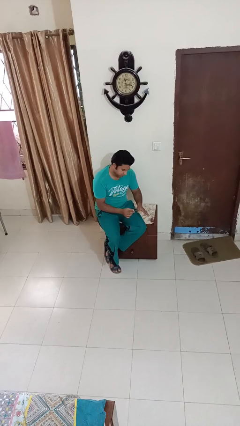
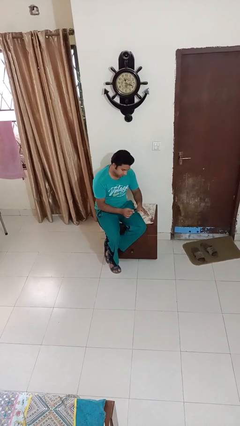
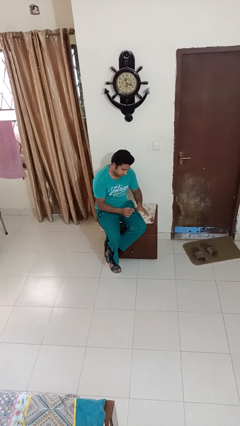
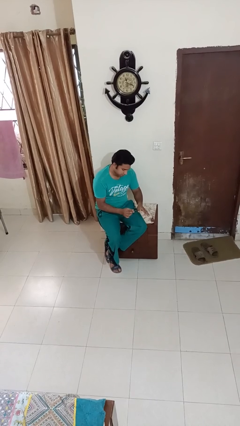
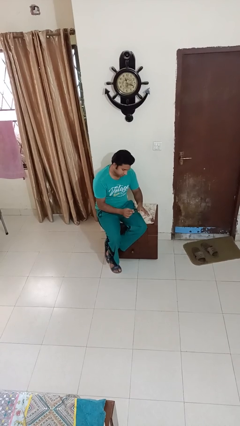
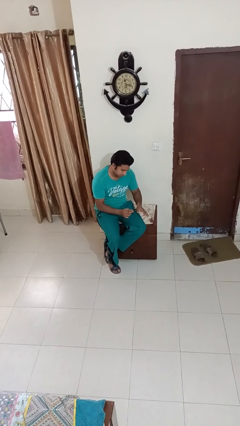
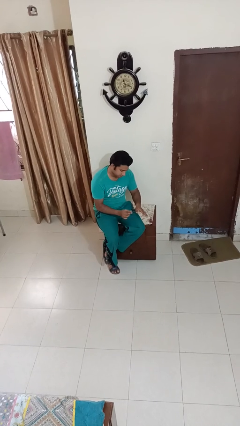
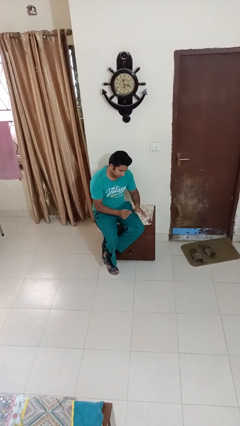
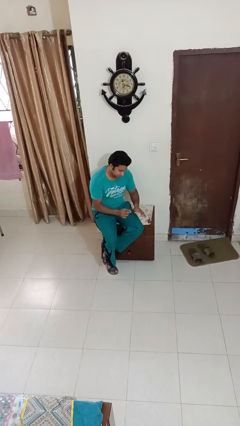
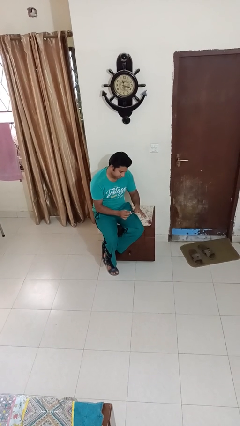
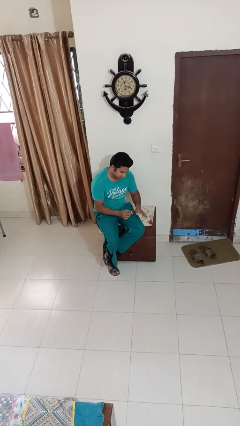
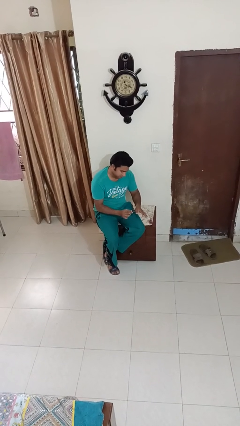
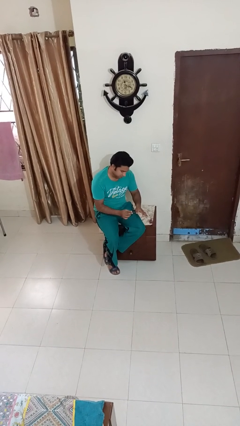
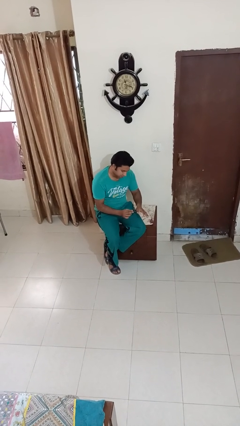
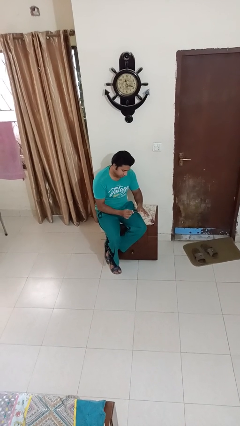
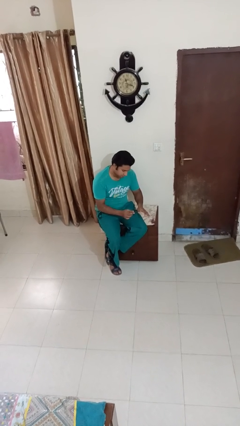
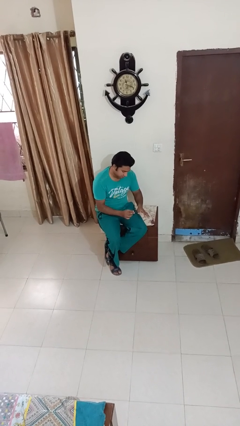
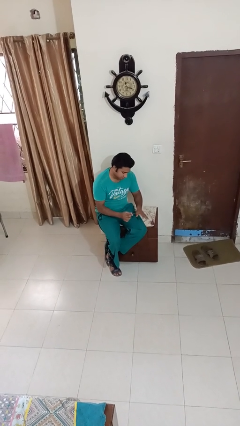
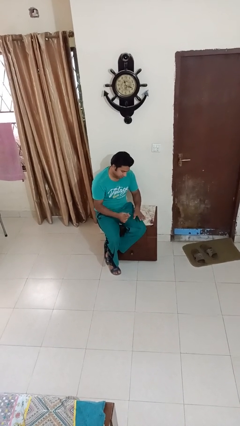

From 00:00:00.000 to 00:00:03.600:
person paints fingernails

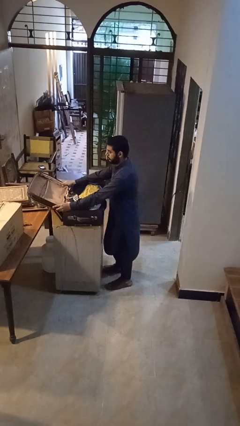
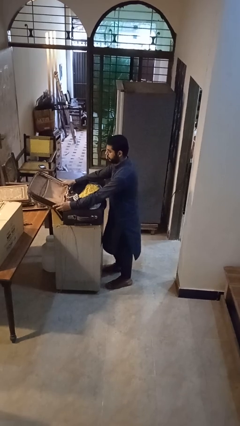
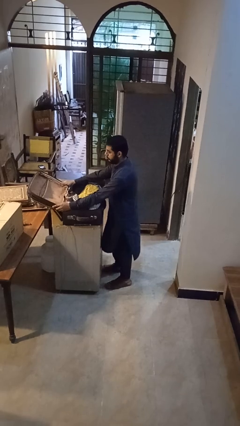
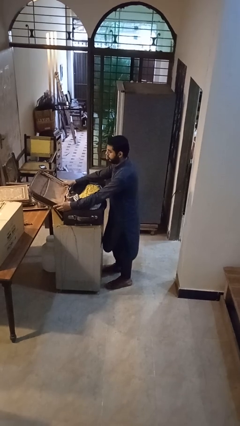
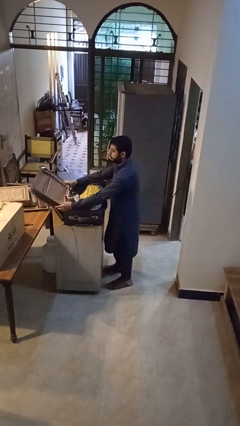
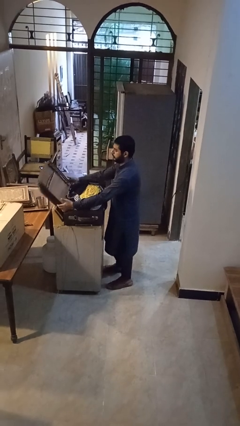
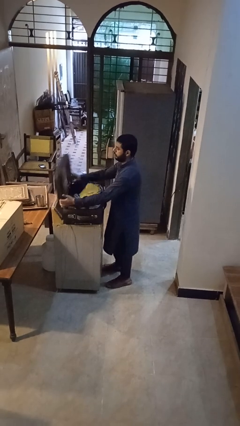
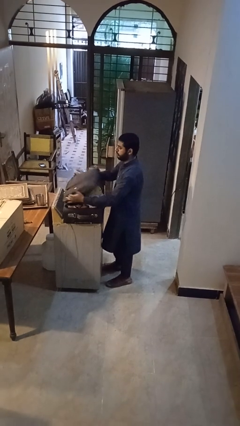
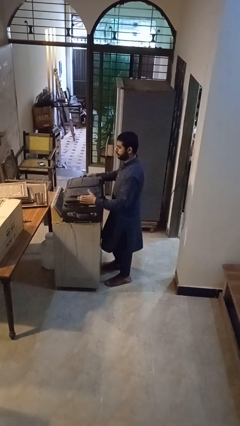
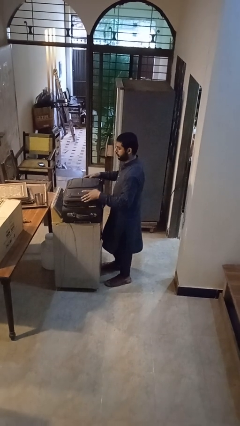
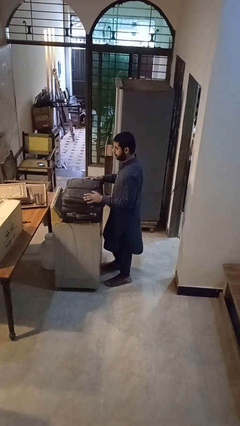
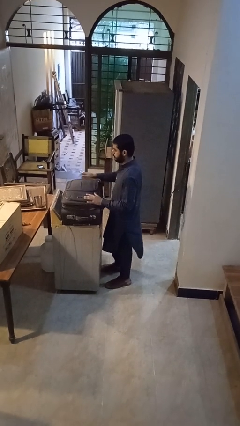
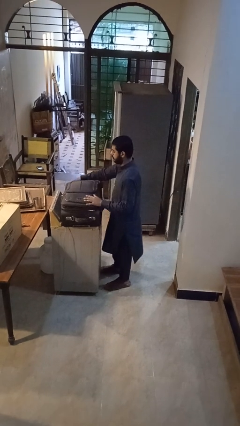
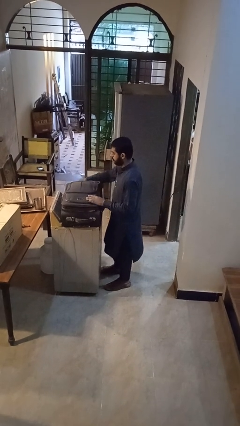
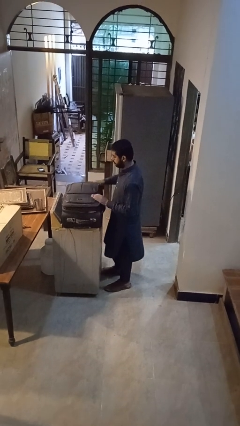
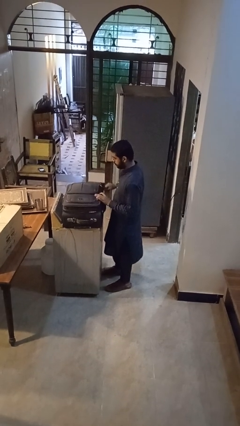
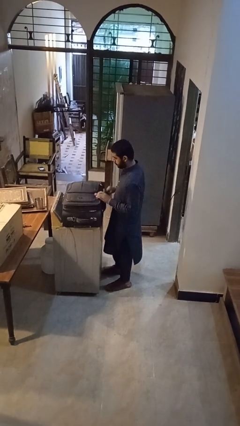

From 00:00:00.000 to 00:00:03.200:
person closes suitcase

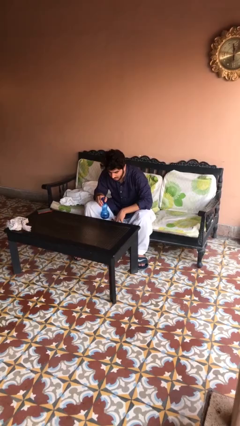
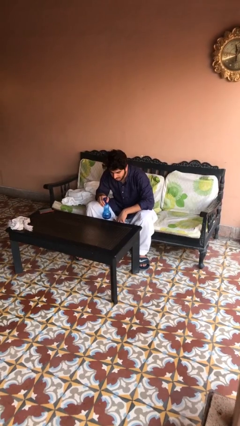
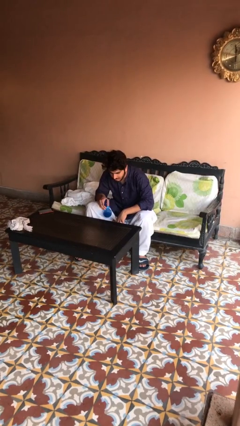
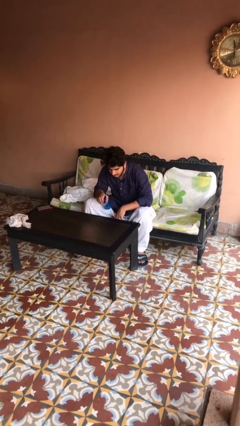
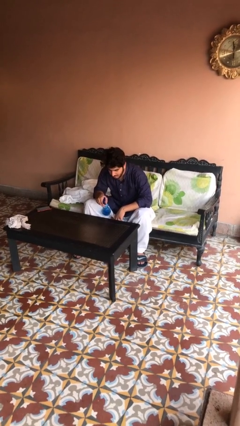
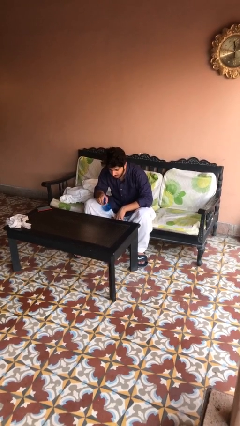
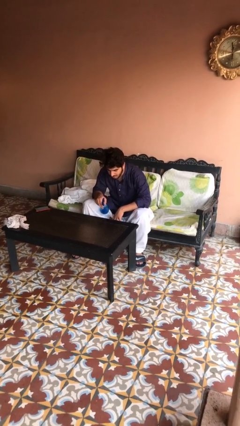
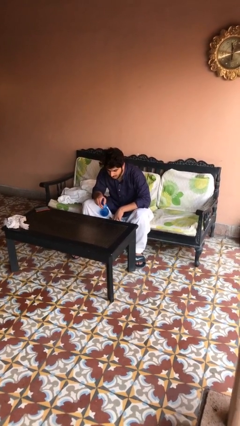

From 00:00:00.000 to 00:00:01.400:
person sprays from bottle

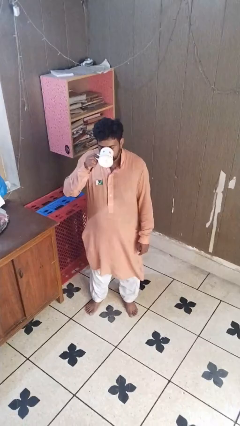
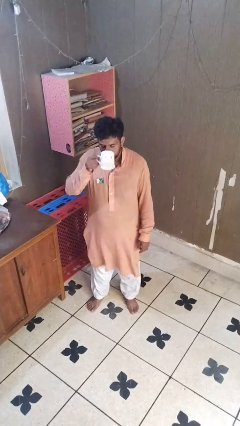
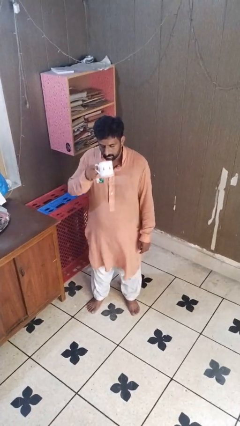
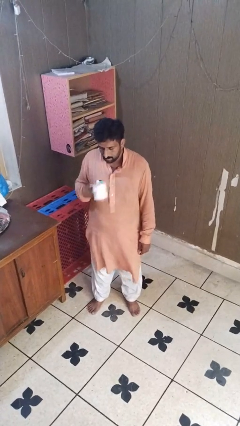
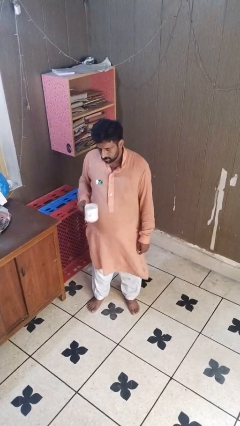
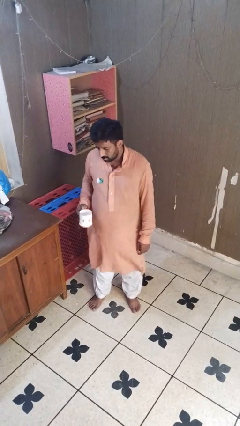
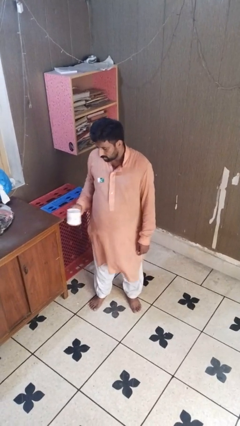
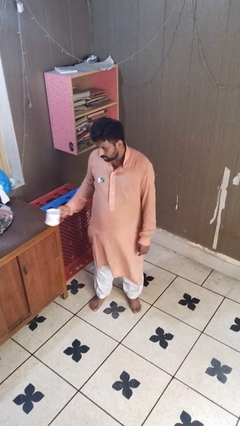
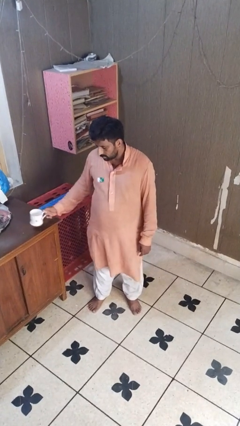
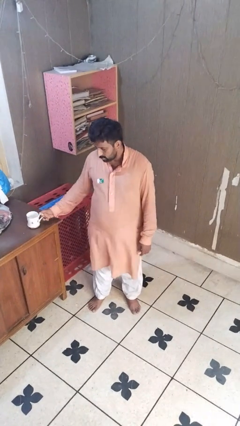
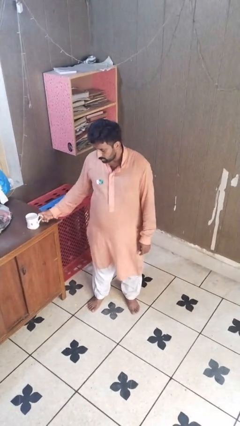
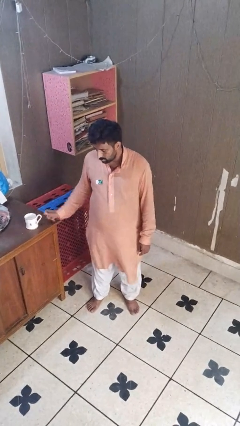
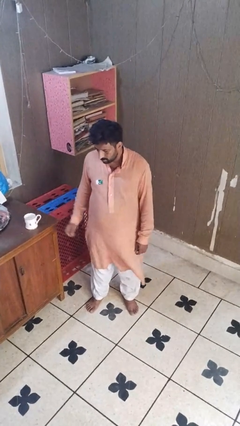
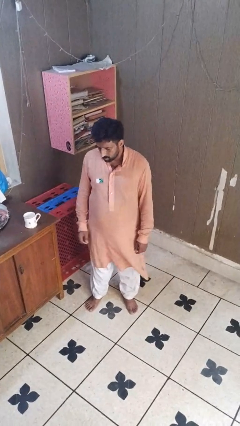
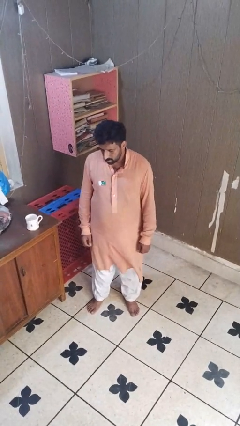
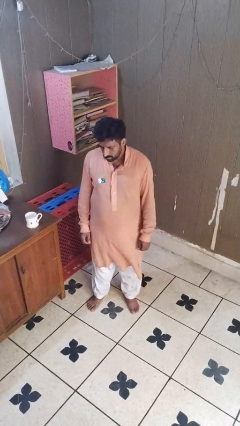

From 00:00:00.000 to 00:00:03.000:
person puts down object on table

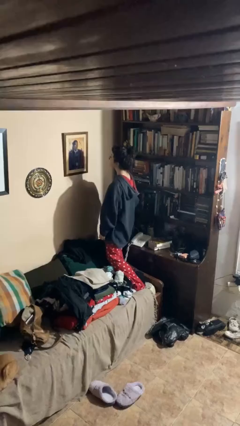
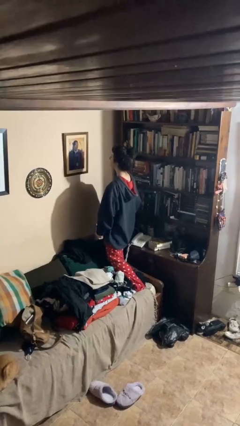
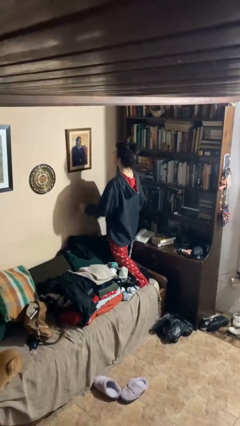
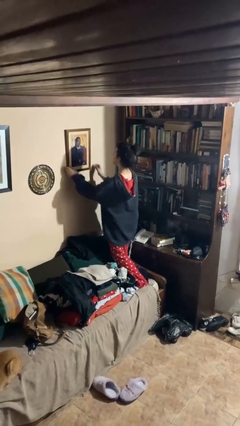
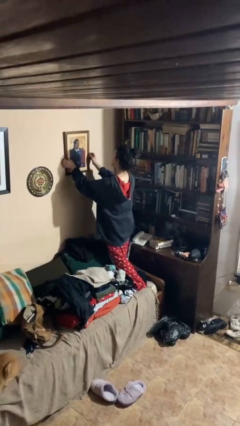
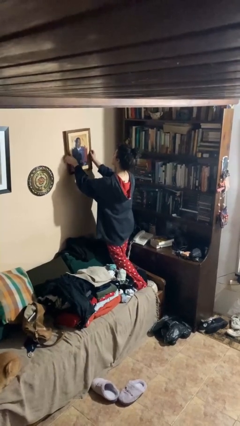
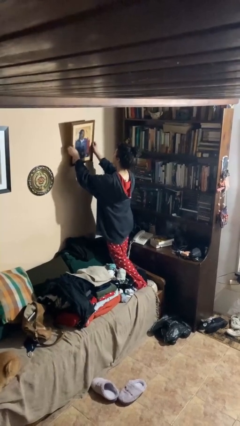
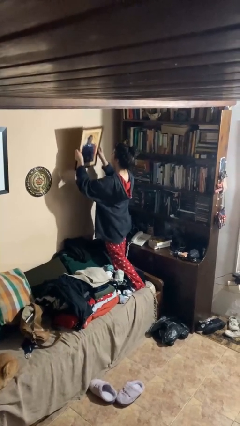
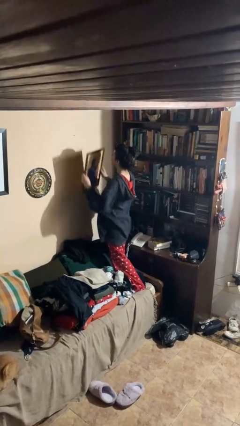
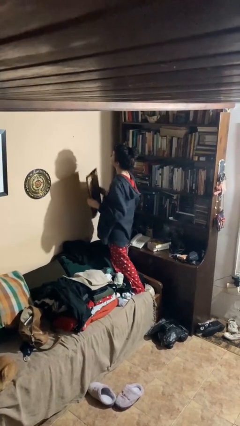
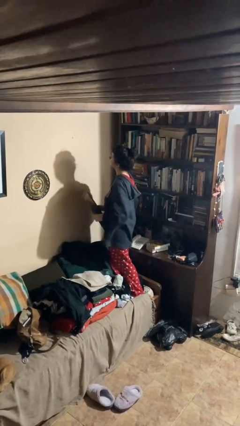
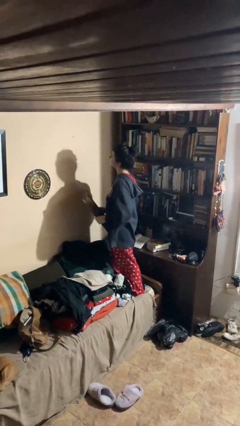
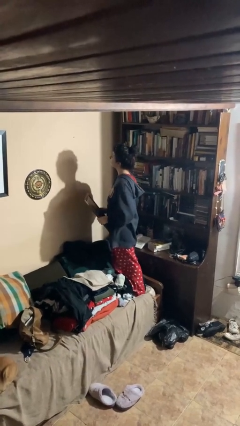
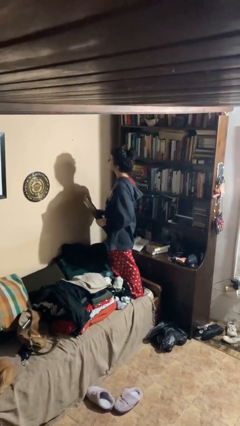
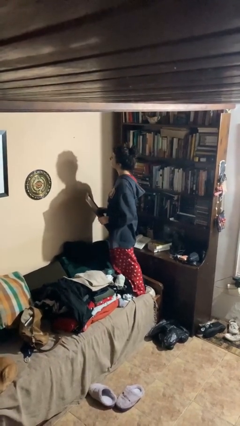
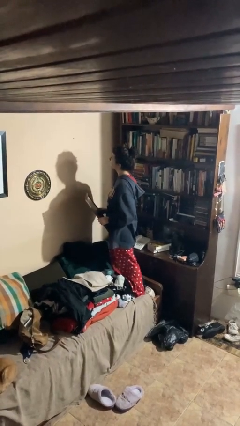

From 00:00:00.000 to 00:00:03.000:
person takes down picture frame

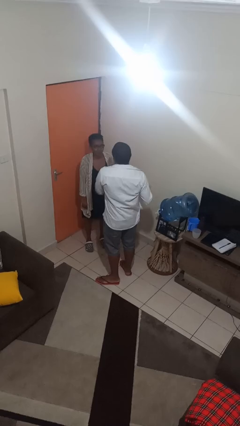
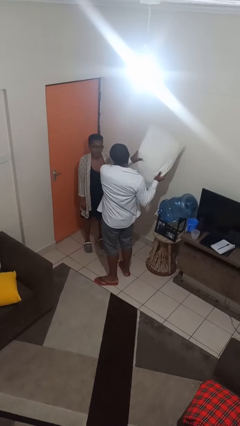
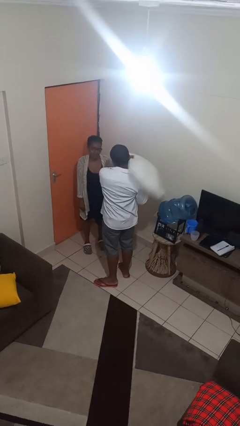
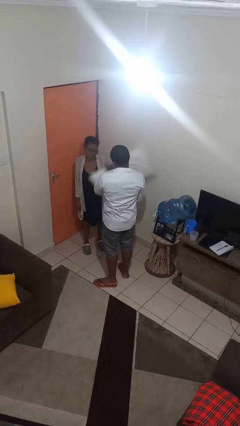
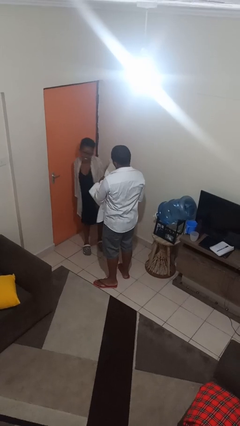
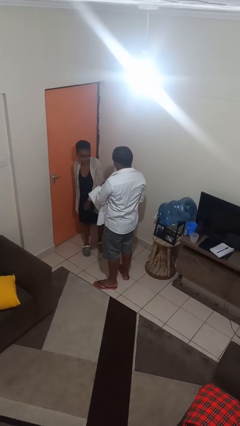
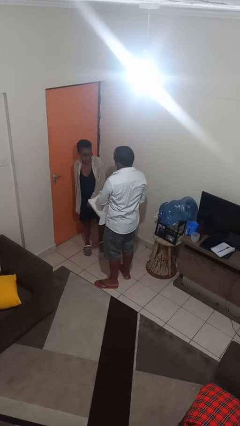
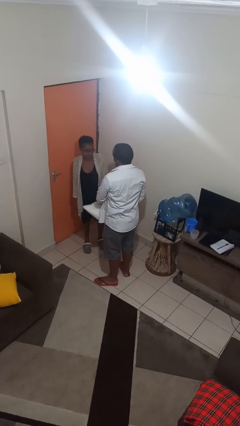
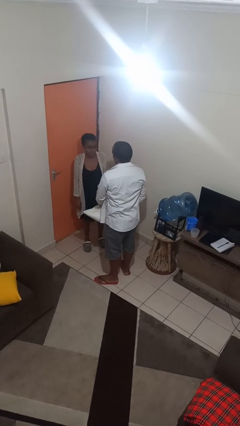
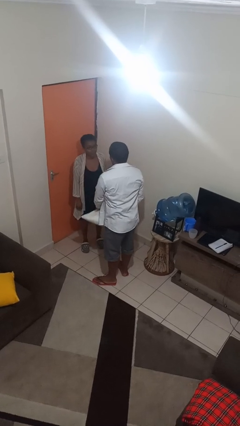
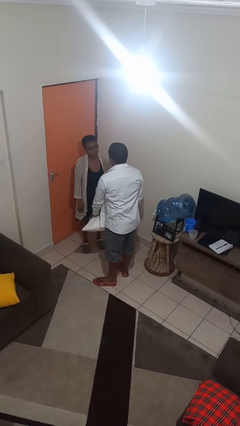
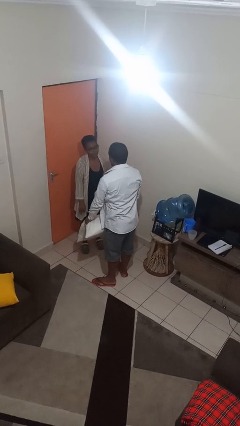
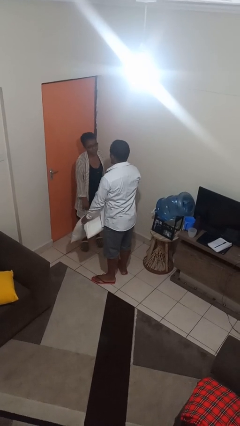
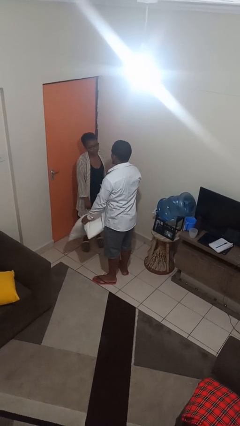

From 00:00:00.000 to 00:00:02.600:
person hits person with pillow

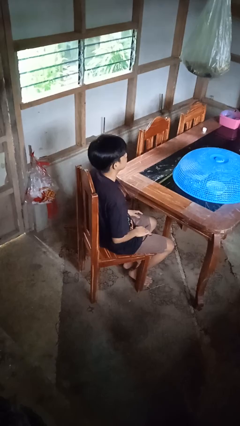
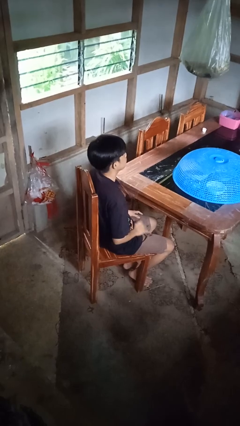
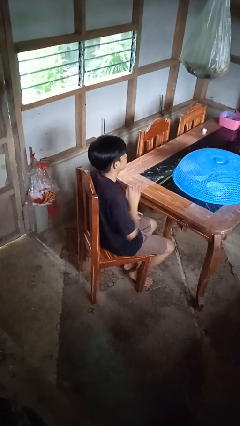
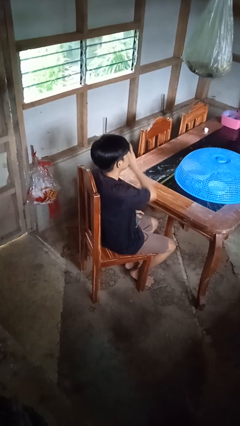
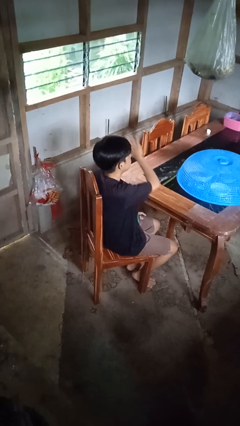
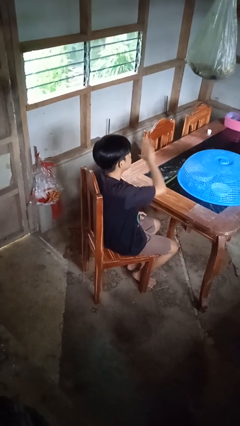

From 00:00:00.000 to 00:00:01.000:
person gestures swipe left
